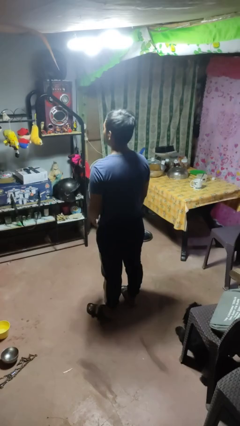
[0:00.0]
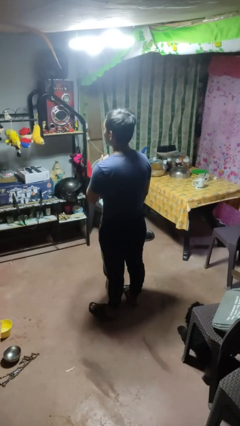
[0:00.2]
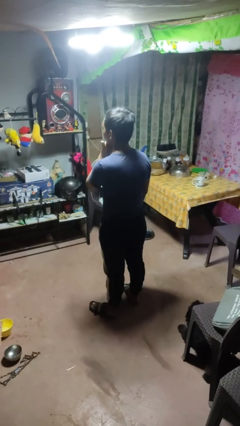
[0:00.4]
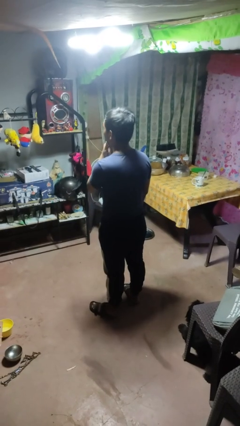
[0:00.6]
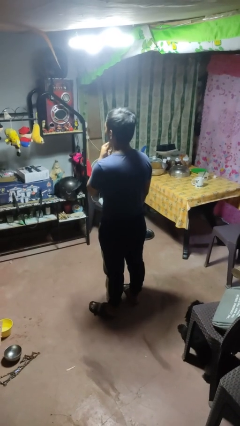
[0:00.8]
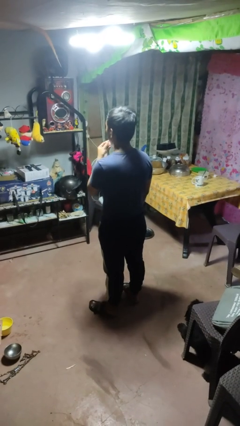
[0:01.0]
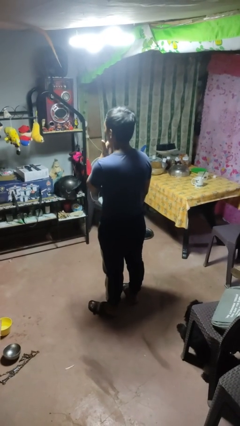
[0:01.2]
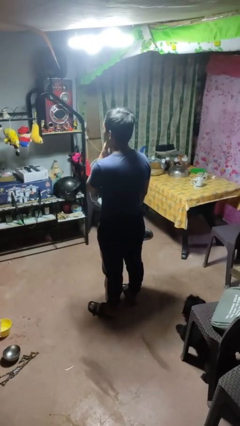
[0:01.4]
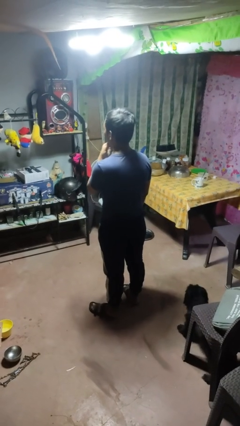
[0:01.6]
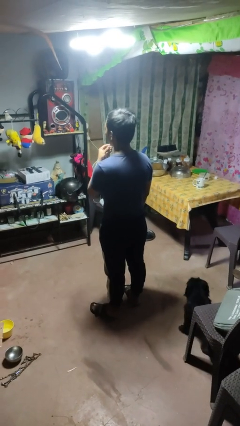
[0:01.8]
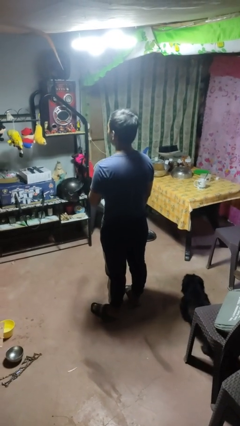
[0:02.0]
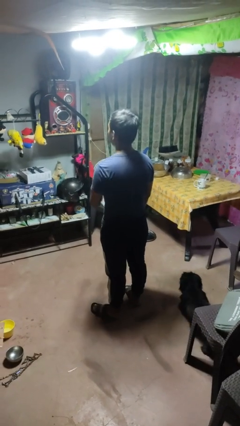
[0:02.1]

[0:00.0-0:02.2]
person strokes chin

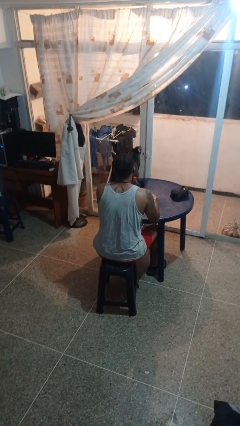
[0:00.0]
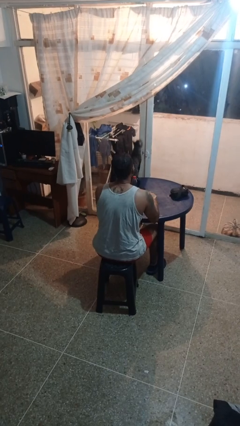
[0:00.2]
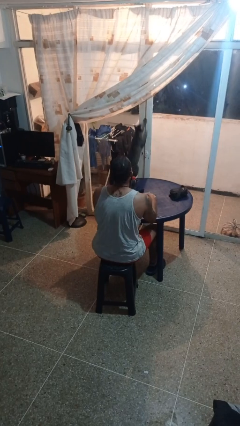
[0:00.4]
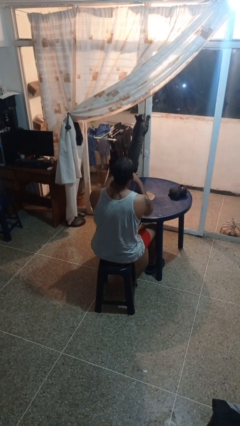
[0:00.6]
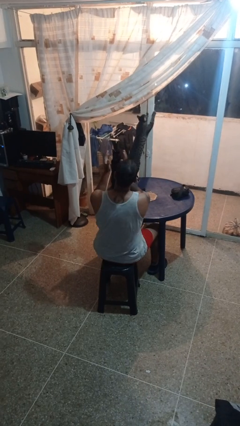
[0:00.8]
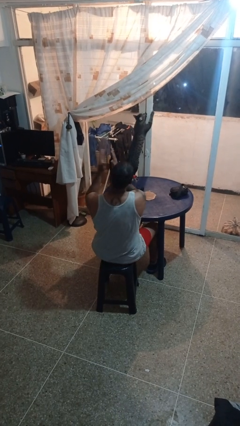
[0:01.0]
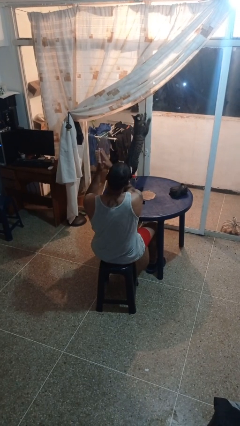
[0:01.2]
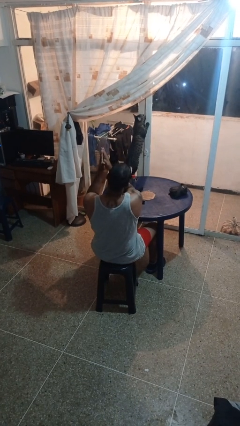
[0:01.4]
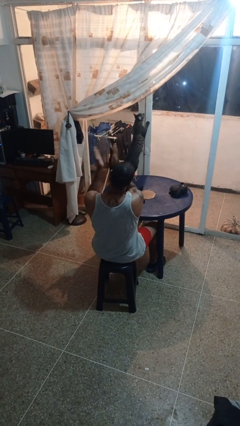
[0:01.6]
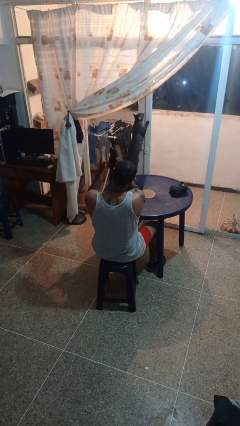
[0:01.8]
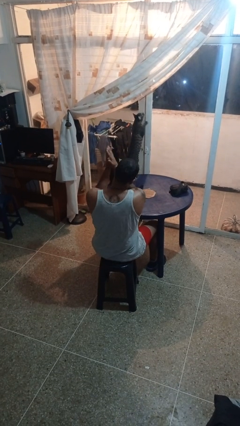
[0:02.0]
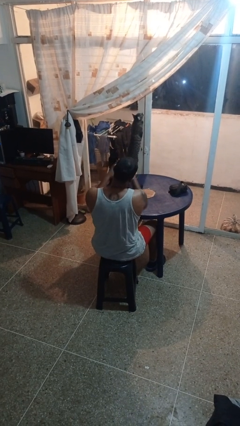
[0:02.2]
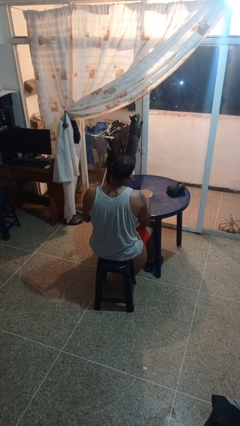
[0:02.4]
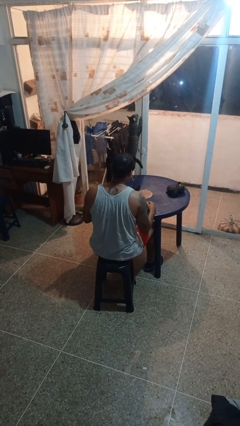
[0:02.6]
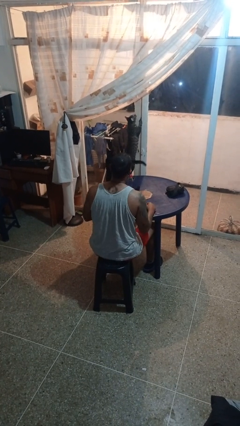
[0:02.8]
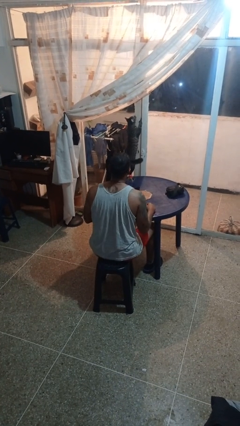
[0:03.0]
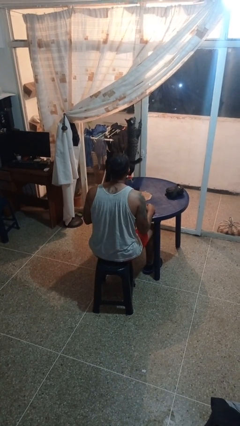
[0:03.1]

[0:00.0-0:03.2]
person claps hands

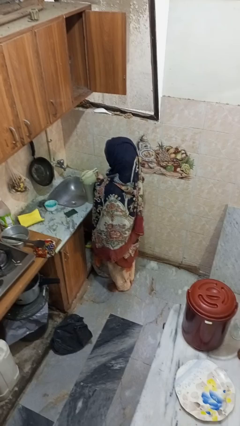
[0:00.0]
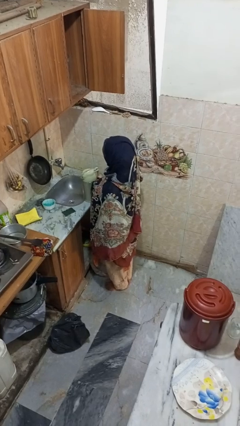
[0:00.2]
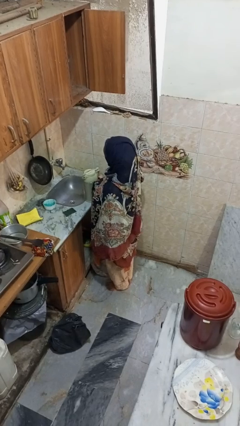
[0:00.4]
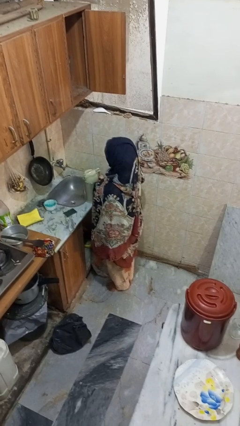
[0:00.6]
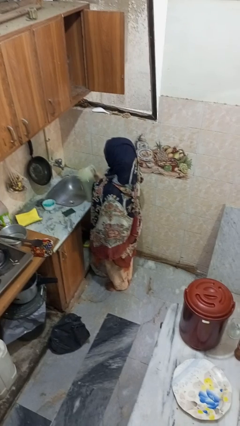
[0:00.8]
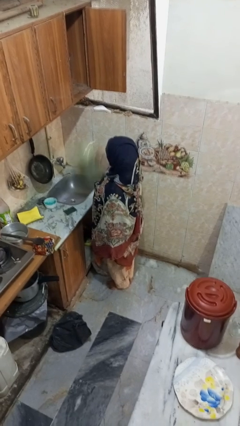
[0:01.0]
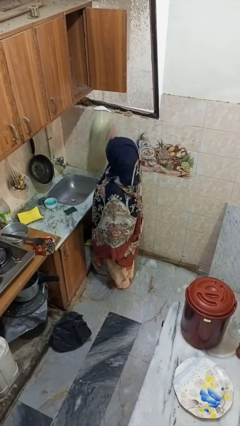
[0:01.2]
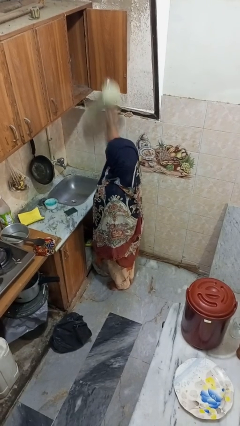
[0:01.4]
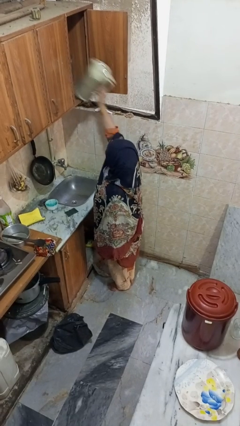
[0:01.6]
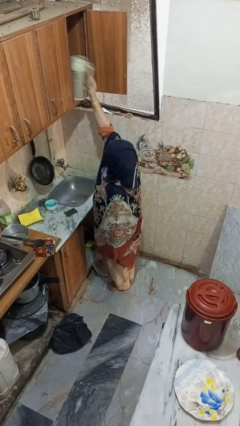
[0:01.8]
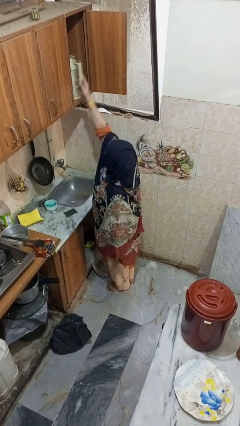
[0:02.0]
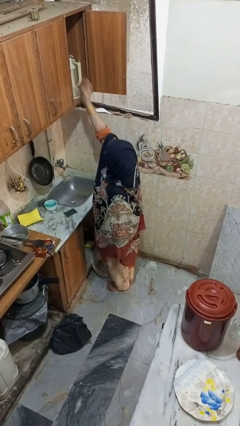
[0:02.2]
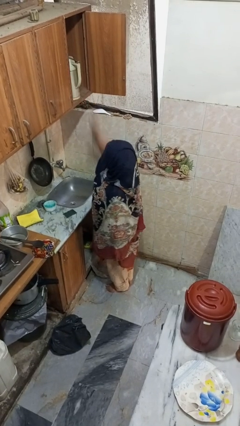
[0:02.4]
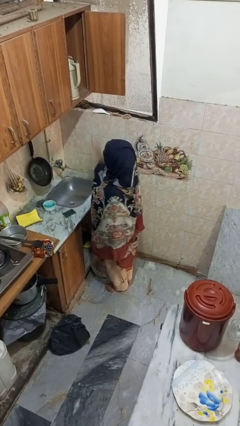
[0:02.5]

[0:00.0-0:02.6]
person takes object from cabinet

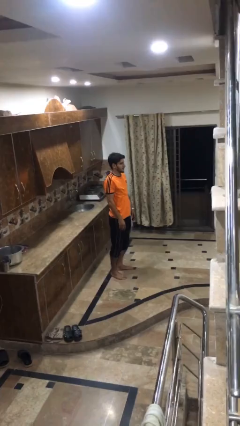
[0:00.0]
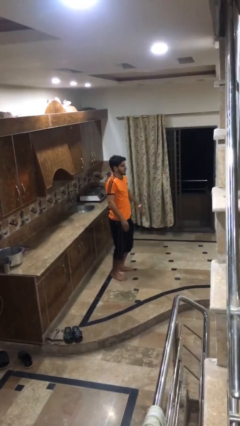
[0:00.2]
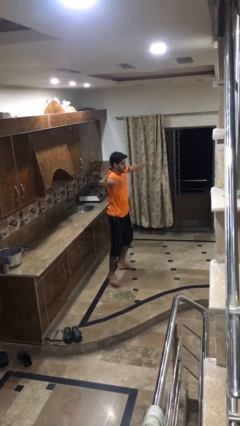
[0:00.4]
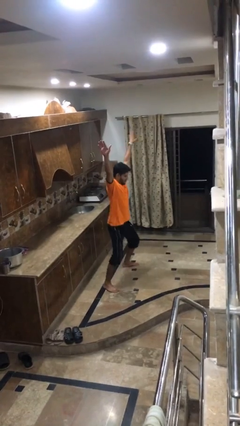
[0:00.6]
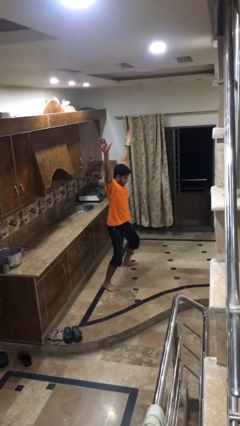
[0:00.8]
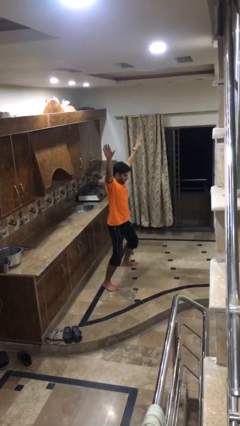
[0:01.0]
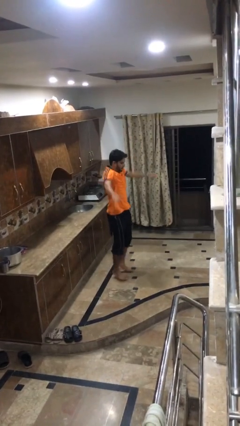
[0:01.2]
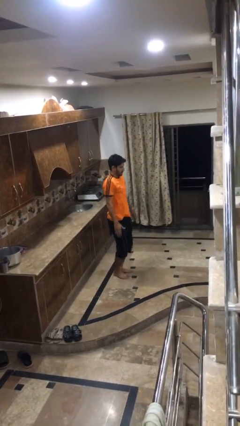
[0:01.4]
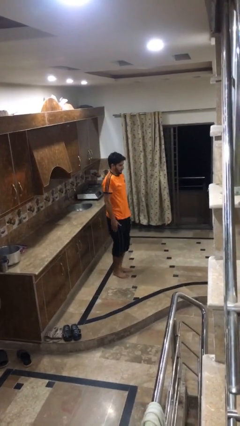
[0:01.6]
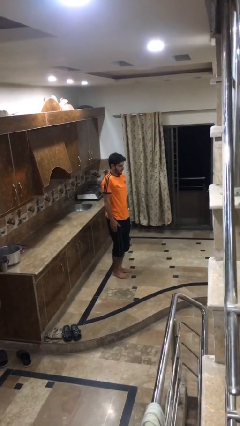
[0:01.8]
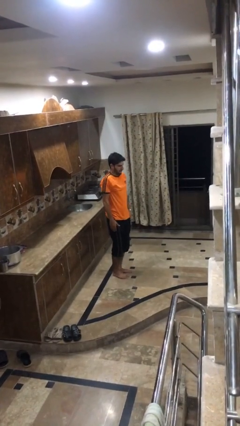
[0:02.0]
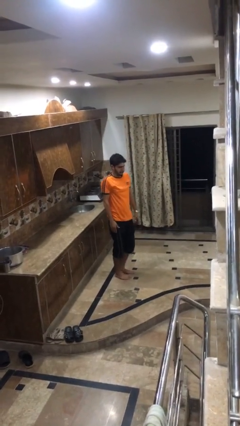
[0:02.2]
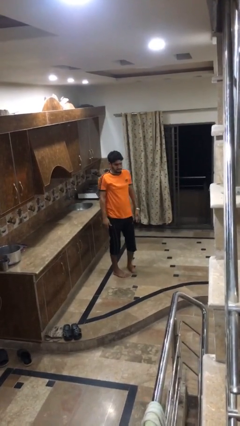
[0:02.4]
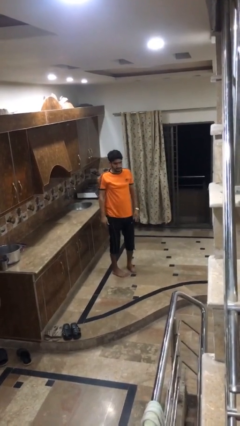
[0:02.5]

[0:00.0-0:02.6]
person exercises with jumping jacks

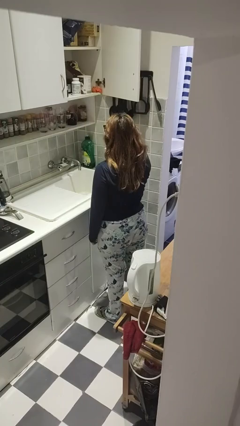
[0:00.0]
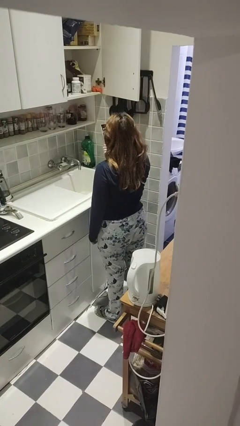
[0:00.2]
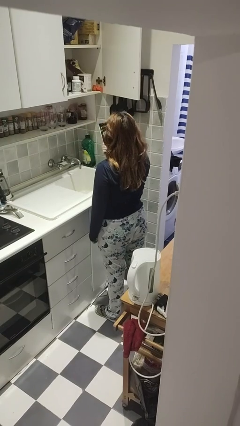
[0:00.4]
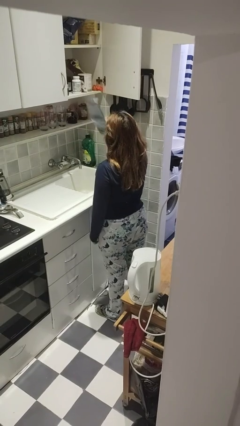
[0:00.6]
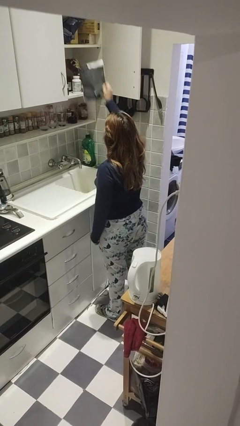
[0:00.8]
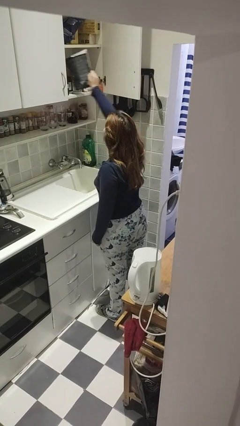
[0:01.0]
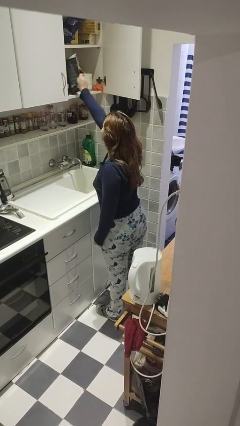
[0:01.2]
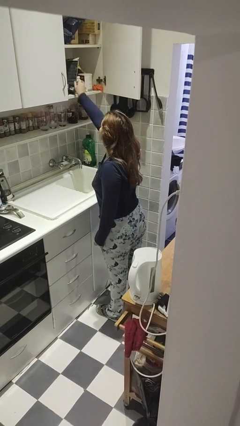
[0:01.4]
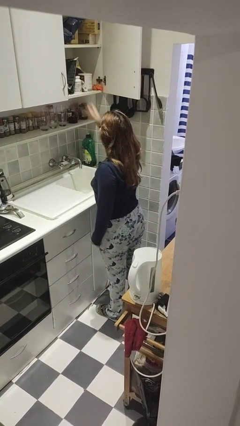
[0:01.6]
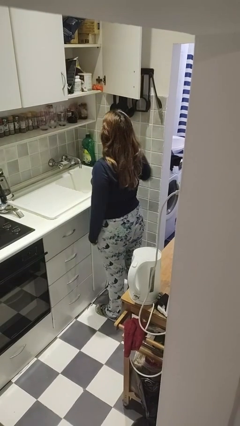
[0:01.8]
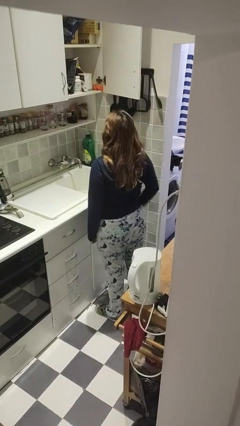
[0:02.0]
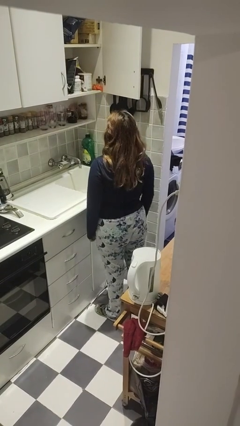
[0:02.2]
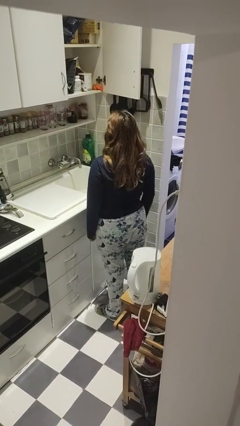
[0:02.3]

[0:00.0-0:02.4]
person puts object in cabinet

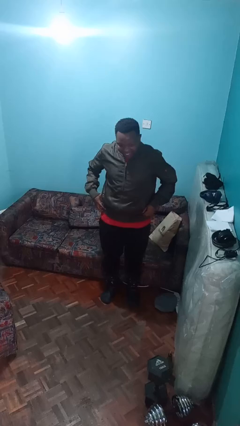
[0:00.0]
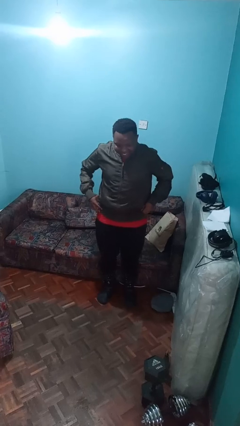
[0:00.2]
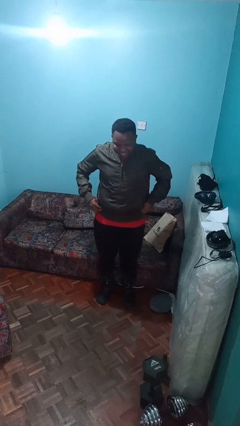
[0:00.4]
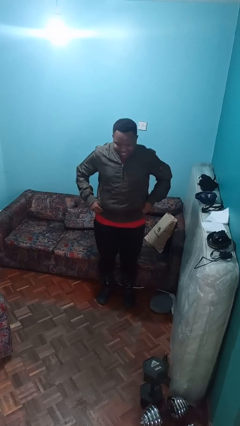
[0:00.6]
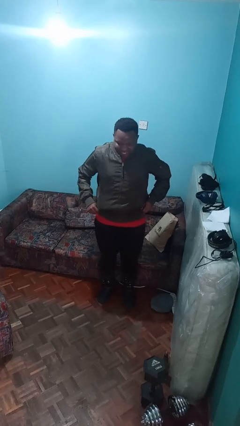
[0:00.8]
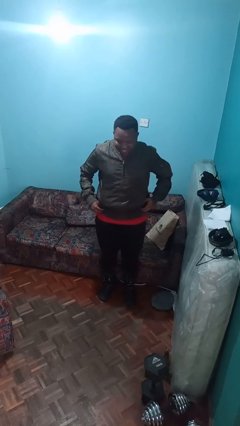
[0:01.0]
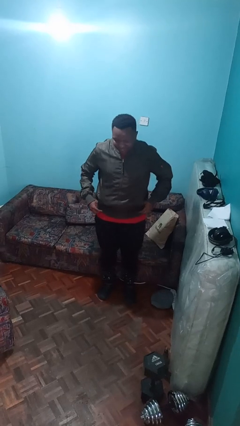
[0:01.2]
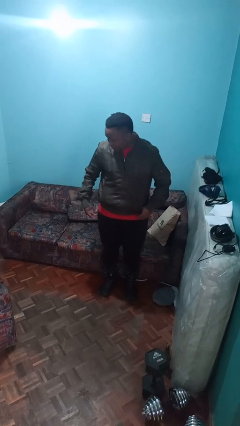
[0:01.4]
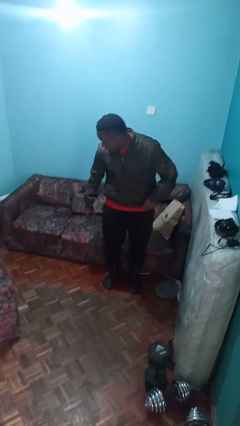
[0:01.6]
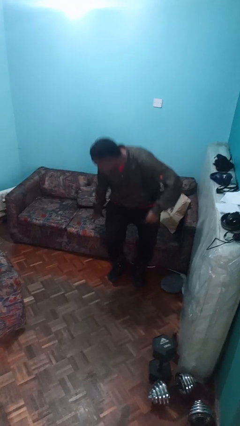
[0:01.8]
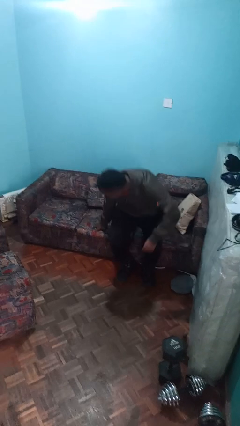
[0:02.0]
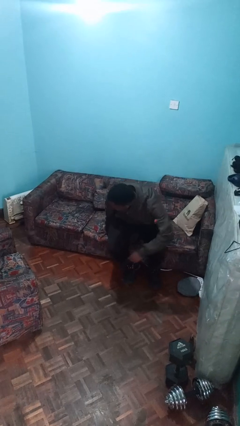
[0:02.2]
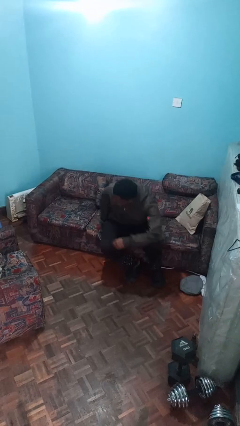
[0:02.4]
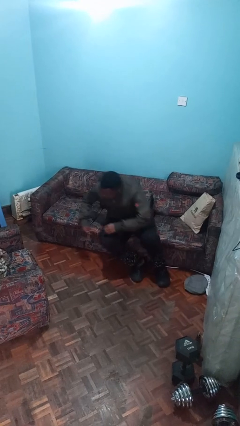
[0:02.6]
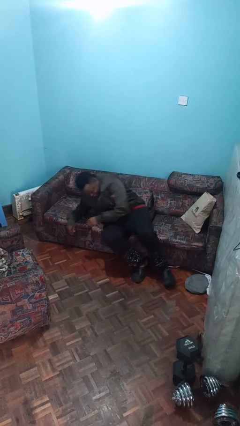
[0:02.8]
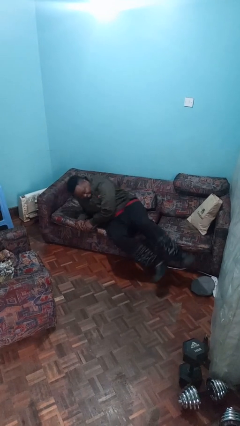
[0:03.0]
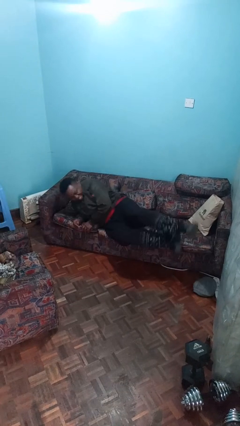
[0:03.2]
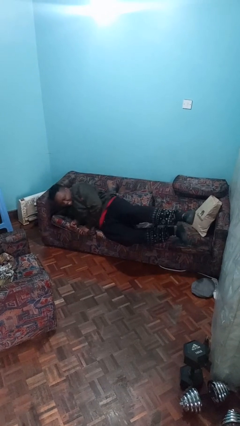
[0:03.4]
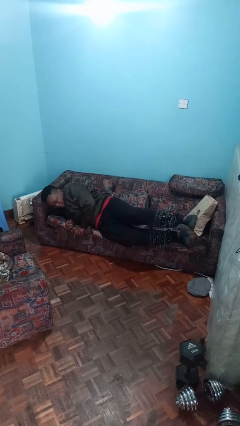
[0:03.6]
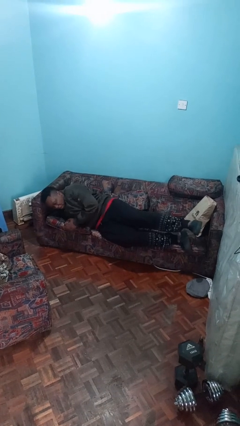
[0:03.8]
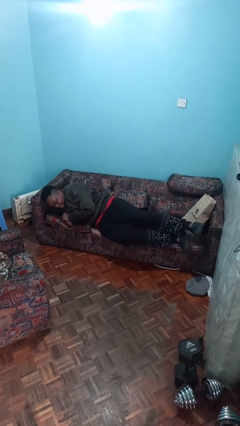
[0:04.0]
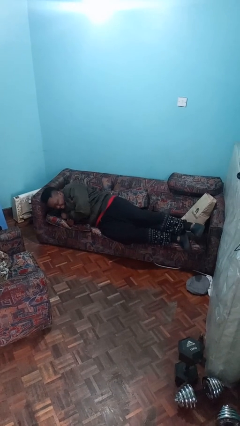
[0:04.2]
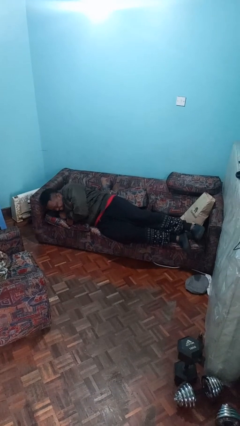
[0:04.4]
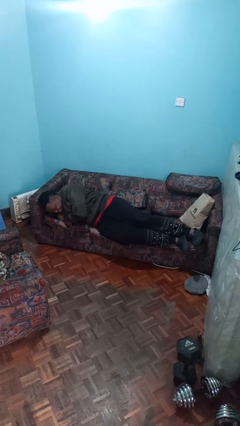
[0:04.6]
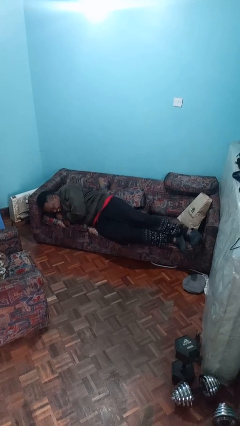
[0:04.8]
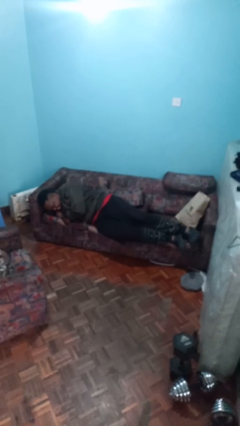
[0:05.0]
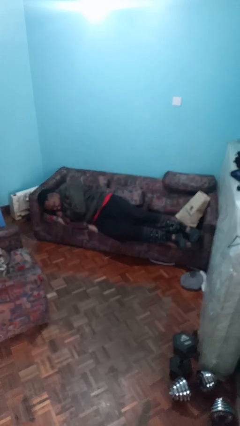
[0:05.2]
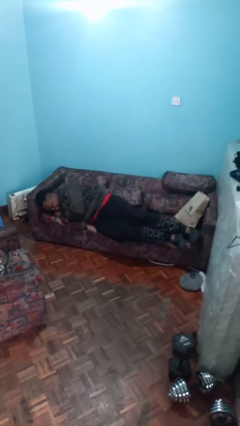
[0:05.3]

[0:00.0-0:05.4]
person lies down on couch
